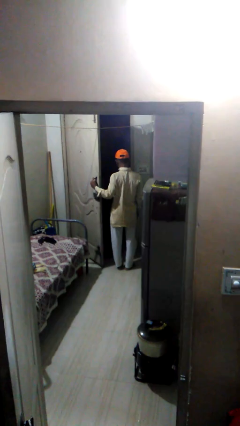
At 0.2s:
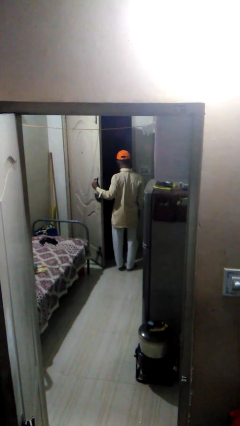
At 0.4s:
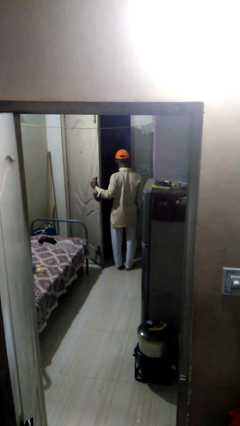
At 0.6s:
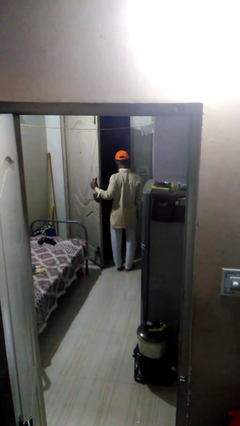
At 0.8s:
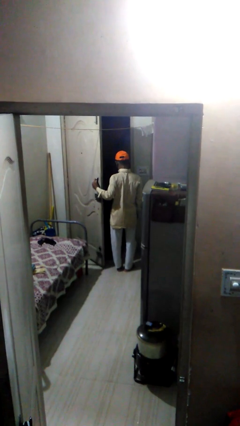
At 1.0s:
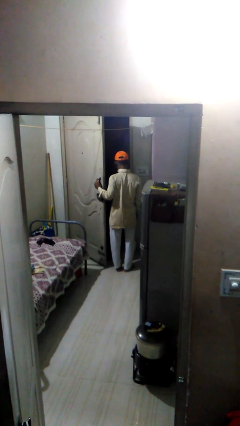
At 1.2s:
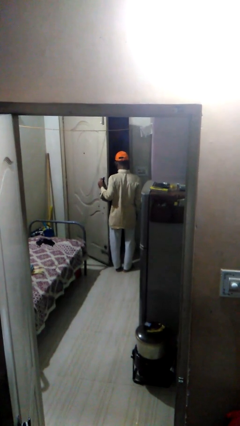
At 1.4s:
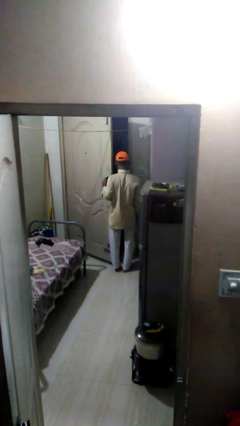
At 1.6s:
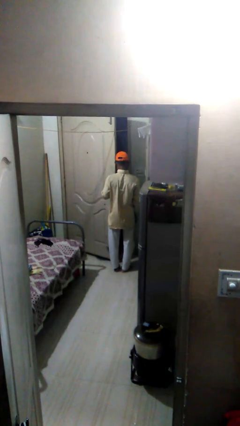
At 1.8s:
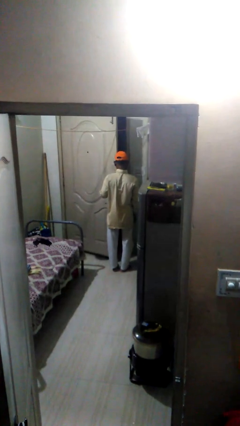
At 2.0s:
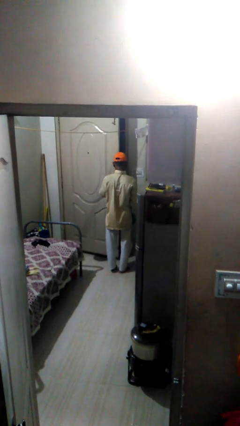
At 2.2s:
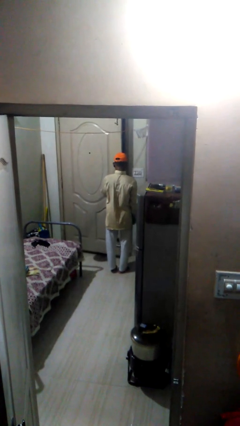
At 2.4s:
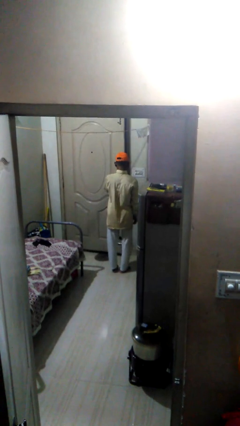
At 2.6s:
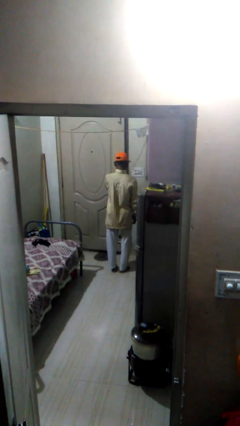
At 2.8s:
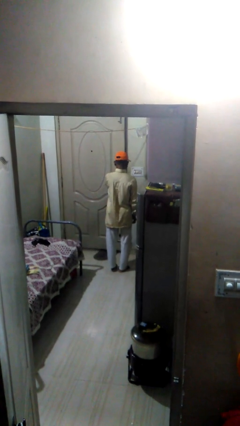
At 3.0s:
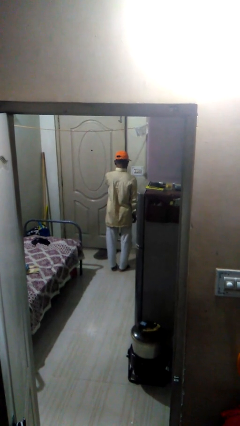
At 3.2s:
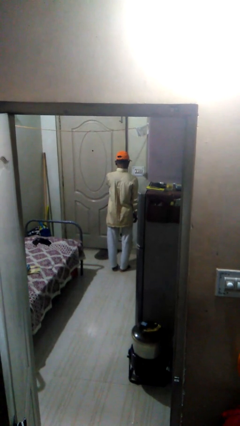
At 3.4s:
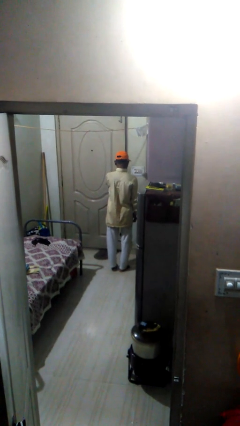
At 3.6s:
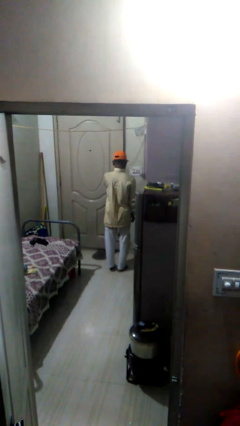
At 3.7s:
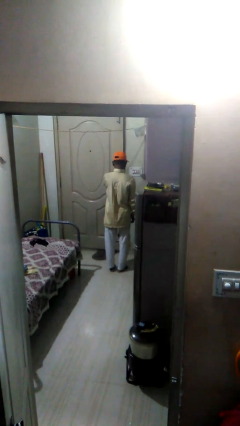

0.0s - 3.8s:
person closes facility door

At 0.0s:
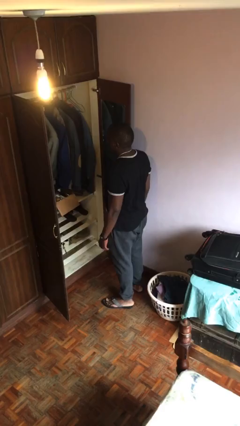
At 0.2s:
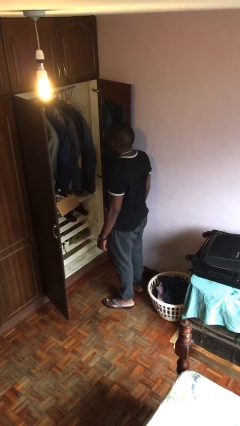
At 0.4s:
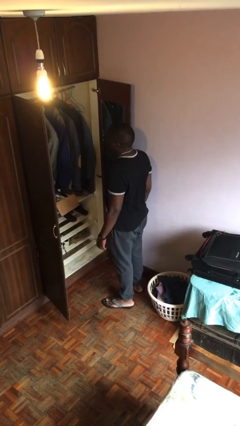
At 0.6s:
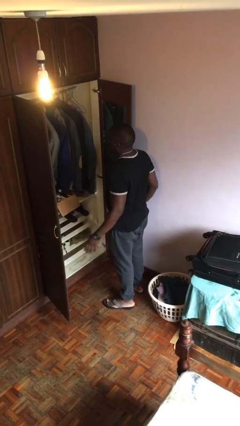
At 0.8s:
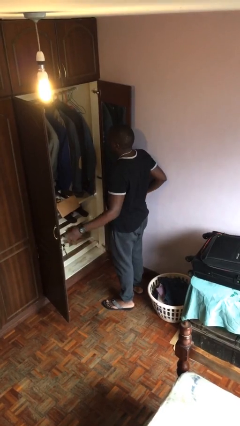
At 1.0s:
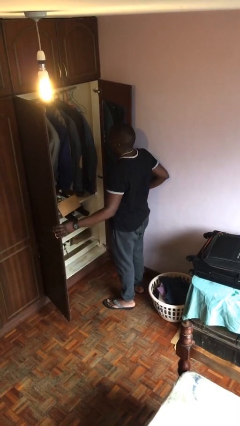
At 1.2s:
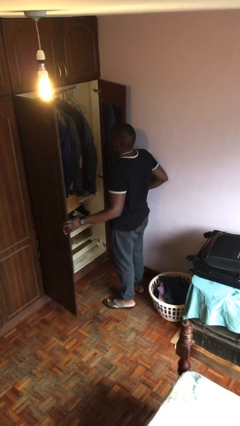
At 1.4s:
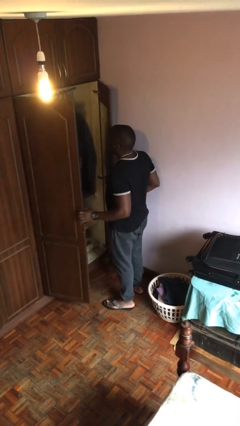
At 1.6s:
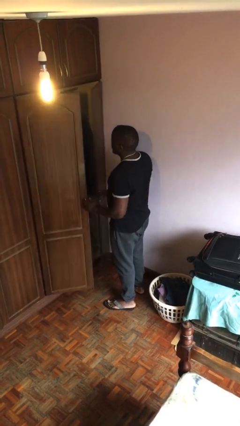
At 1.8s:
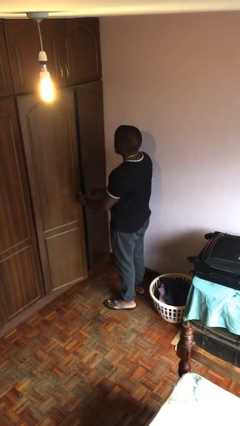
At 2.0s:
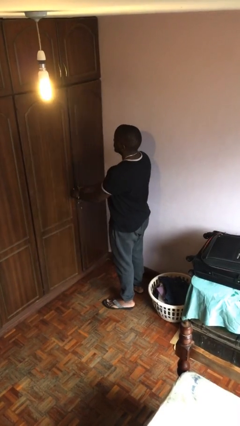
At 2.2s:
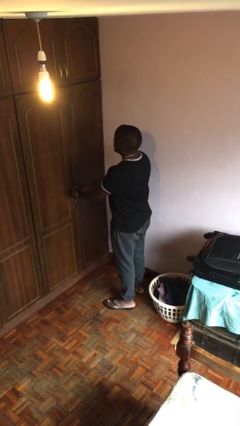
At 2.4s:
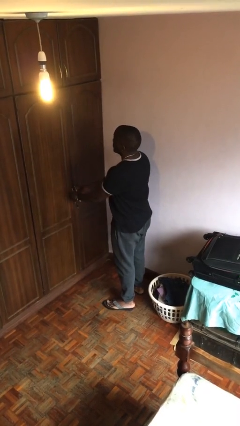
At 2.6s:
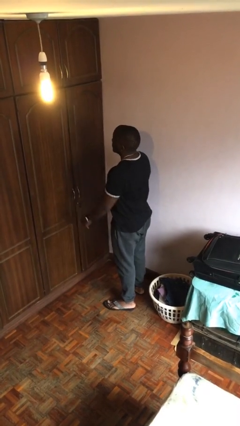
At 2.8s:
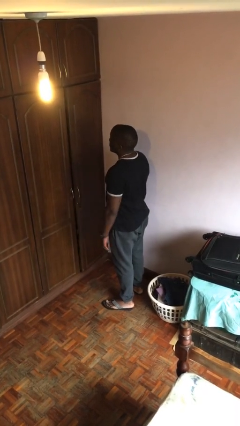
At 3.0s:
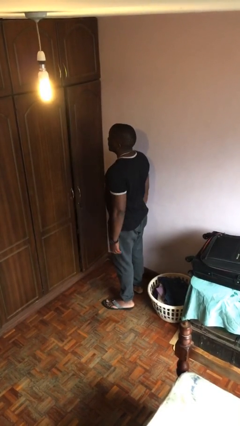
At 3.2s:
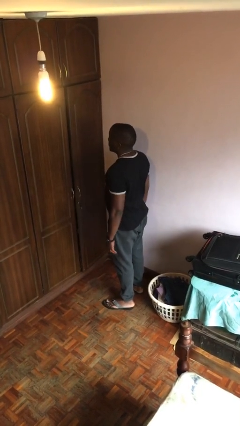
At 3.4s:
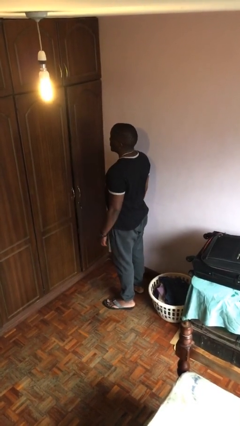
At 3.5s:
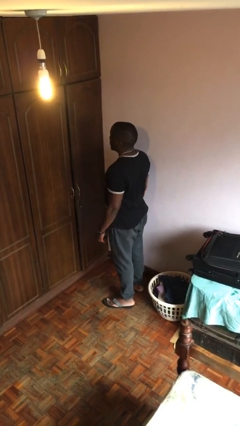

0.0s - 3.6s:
person closes closet door

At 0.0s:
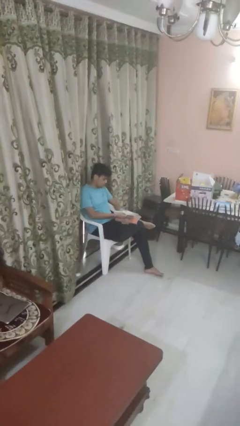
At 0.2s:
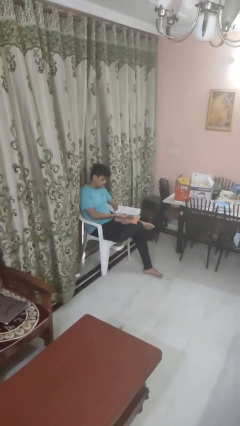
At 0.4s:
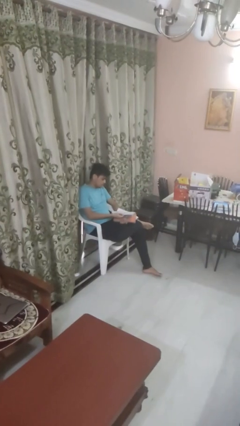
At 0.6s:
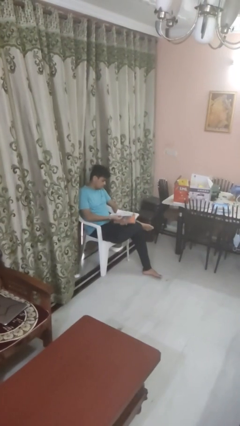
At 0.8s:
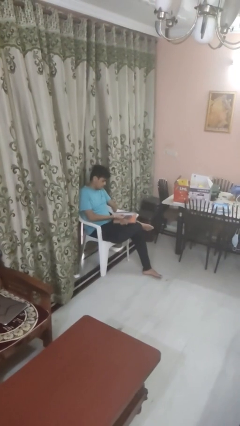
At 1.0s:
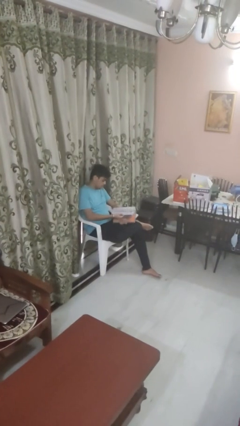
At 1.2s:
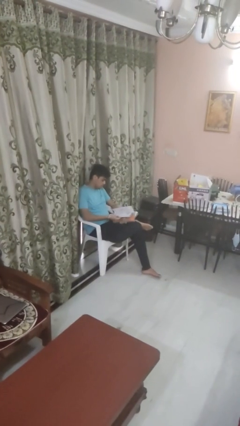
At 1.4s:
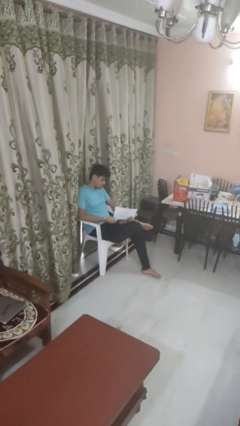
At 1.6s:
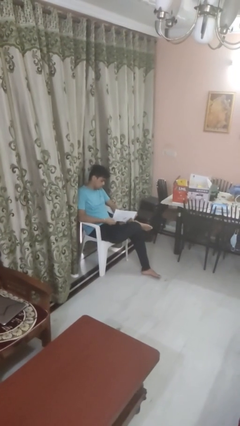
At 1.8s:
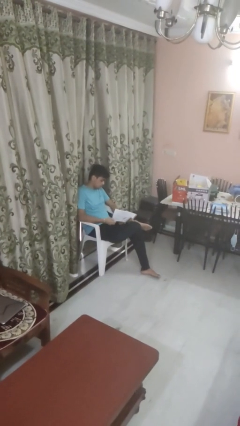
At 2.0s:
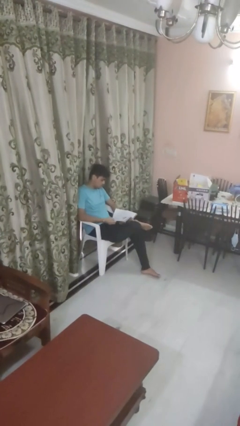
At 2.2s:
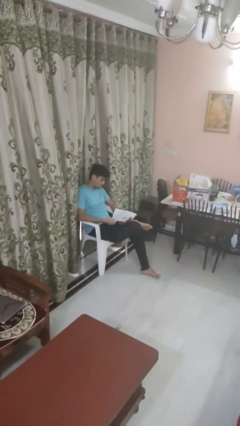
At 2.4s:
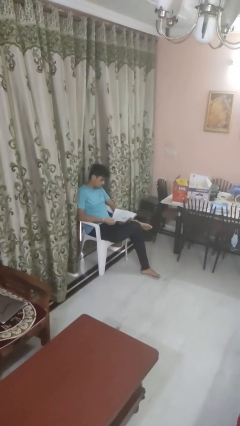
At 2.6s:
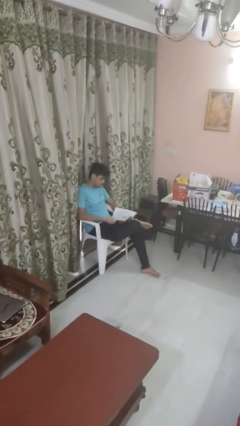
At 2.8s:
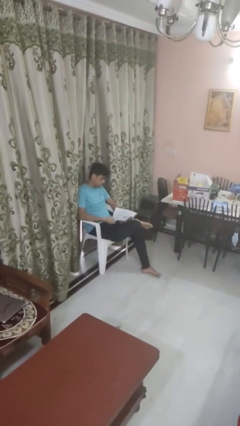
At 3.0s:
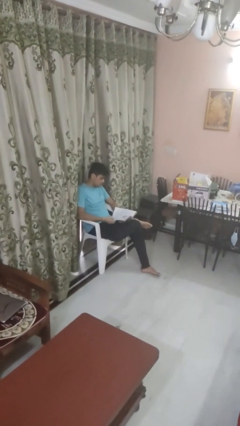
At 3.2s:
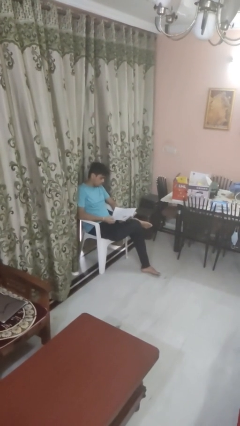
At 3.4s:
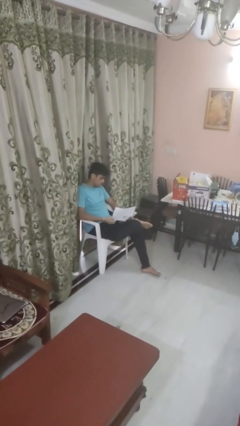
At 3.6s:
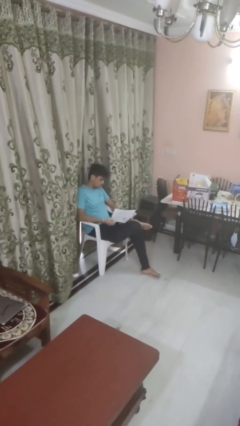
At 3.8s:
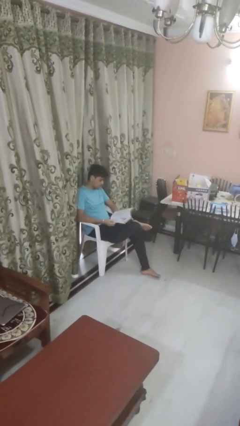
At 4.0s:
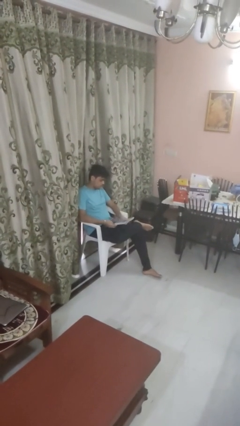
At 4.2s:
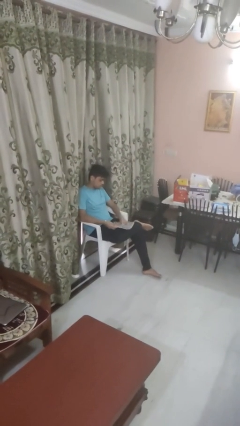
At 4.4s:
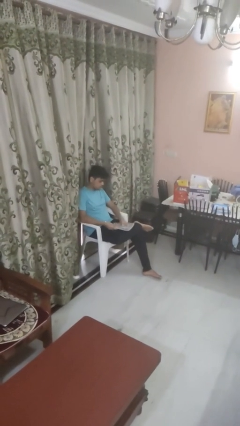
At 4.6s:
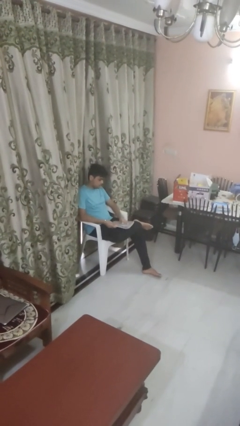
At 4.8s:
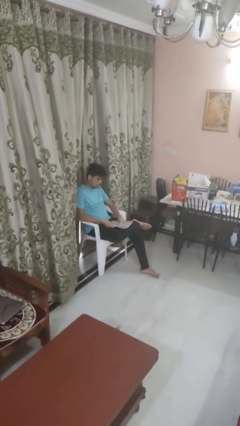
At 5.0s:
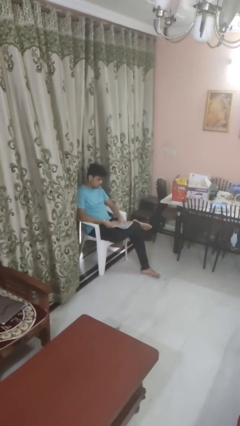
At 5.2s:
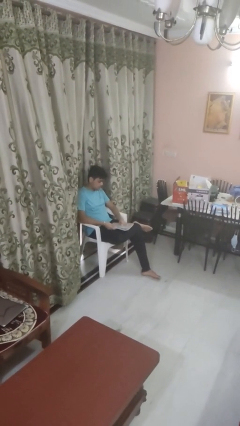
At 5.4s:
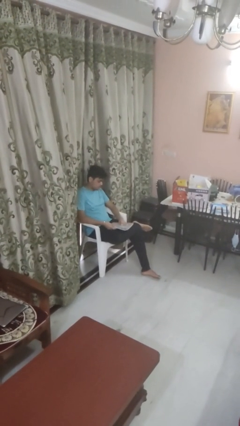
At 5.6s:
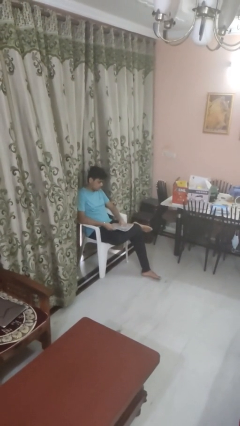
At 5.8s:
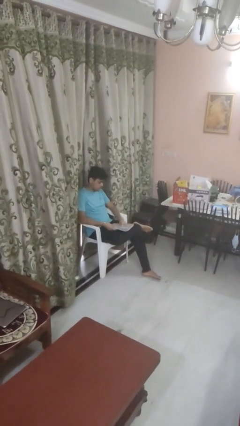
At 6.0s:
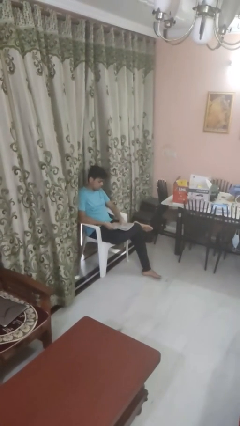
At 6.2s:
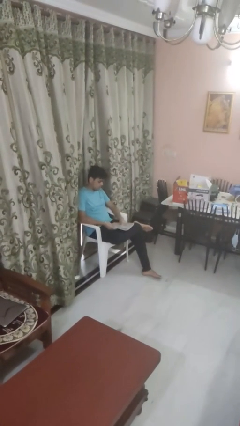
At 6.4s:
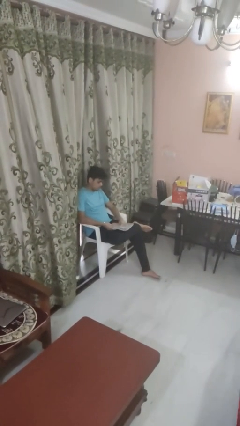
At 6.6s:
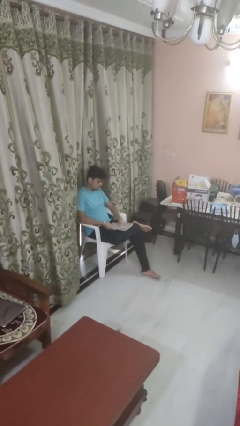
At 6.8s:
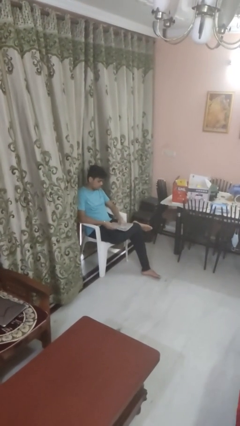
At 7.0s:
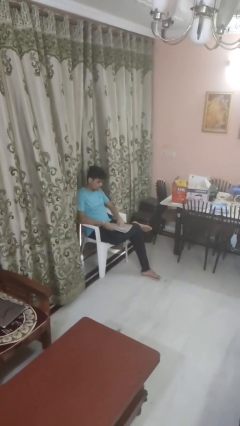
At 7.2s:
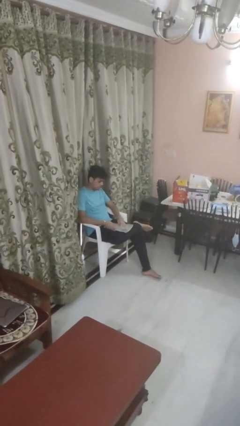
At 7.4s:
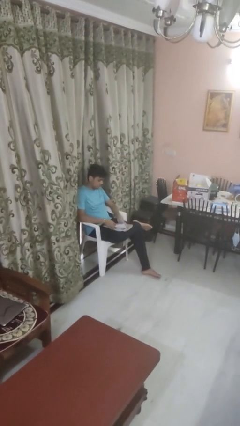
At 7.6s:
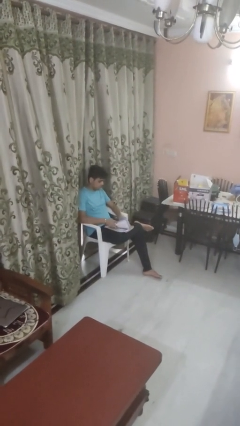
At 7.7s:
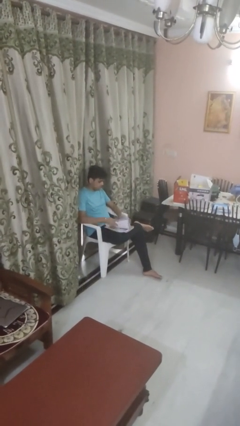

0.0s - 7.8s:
person reads magazine

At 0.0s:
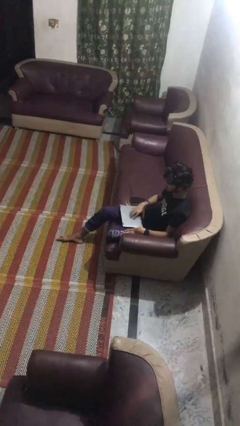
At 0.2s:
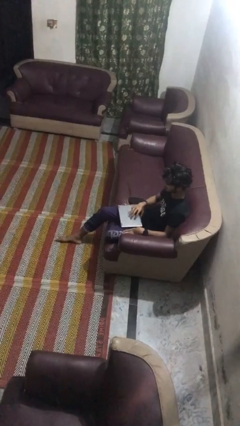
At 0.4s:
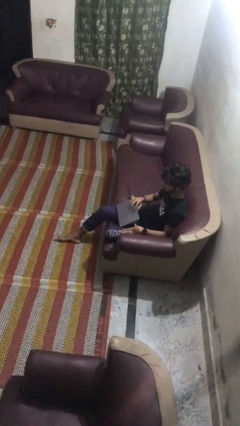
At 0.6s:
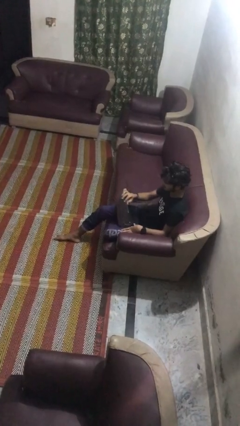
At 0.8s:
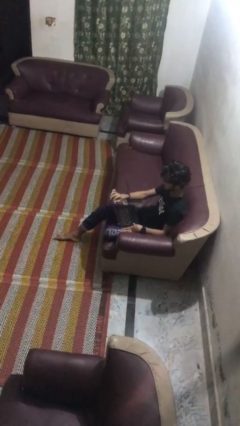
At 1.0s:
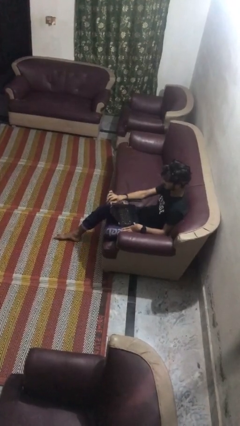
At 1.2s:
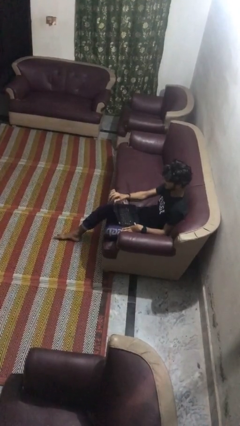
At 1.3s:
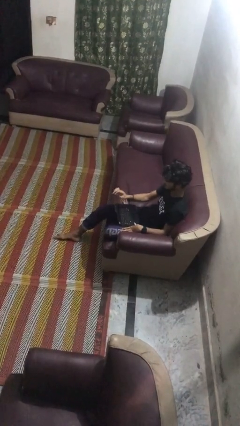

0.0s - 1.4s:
person opens laptop

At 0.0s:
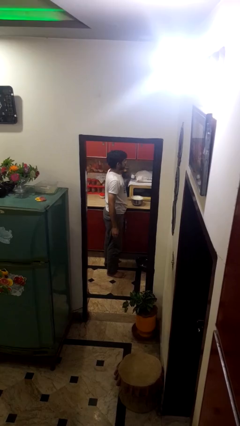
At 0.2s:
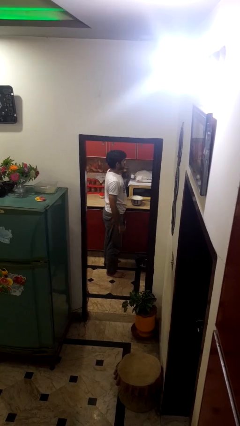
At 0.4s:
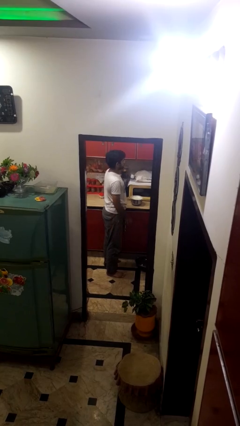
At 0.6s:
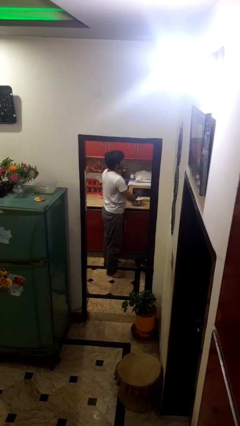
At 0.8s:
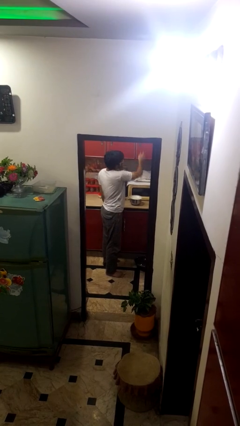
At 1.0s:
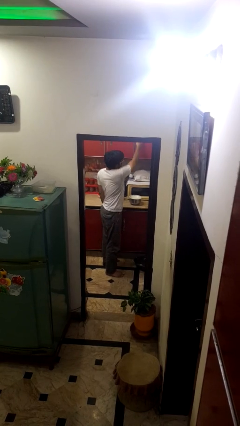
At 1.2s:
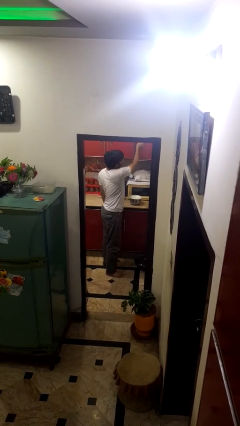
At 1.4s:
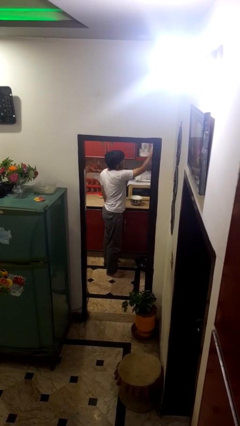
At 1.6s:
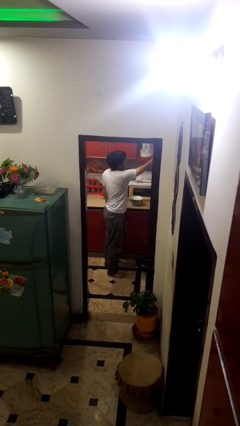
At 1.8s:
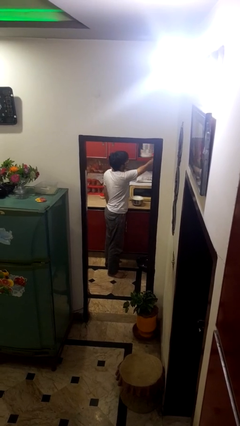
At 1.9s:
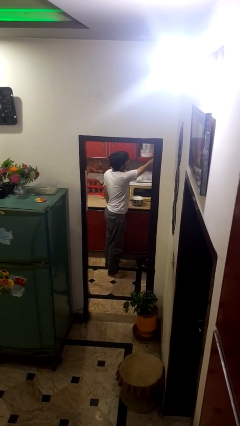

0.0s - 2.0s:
person opens cabinet
